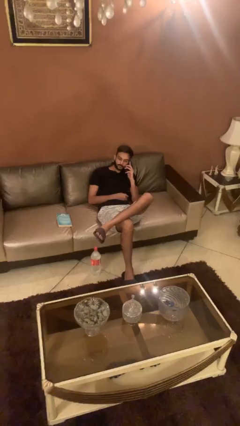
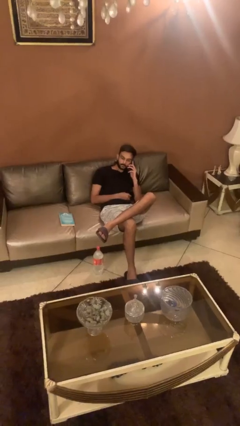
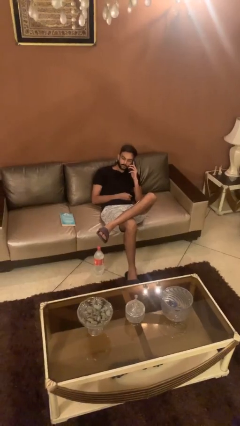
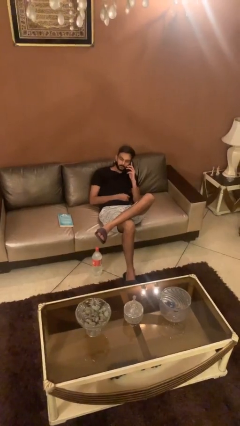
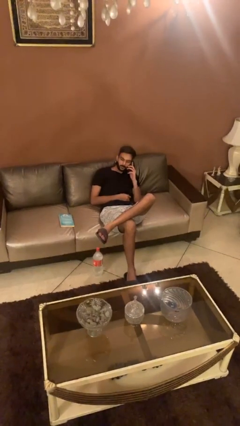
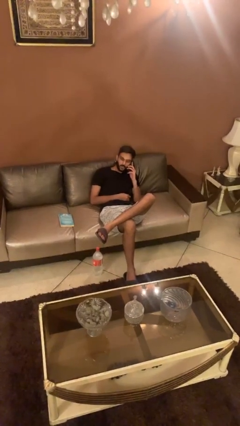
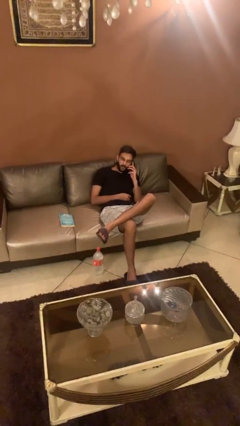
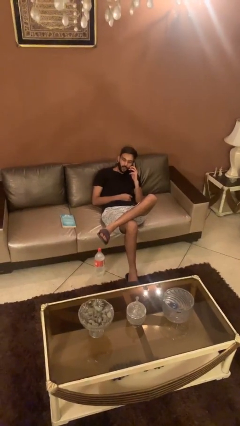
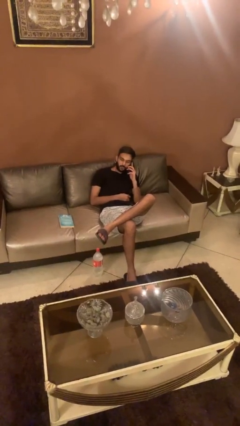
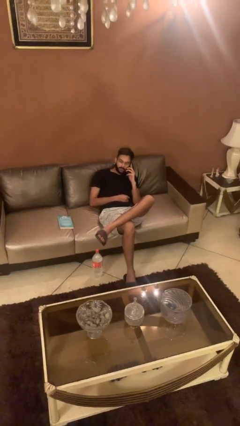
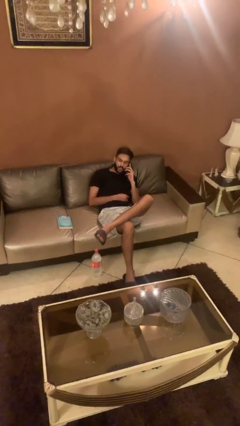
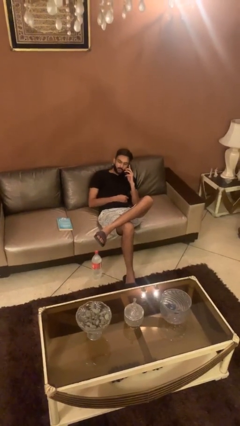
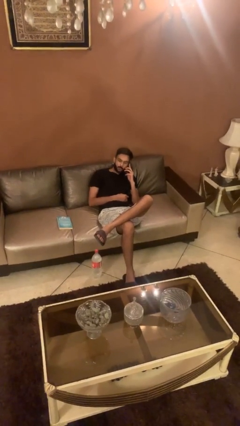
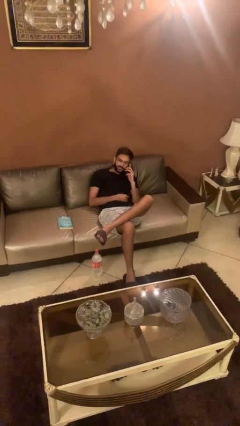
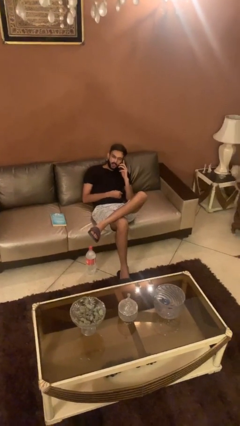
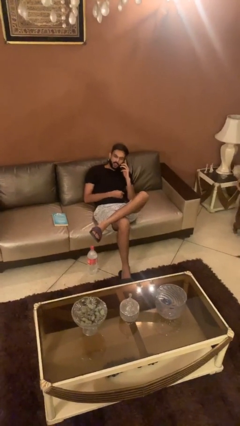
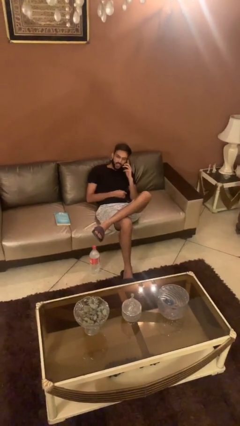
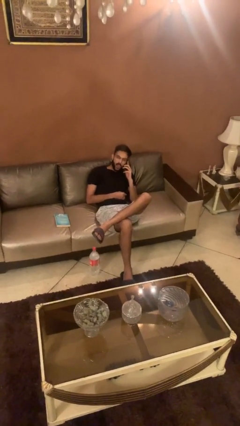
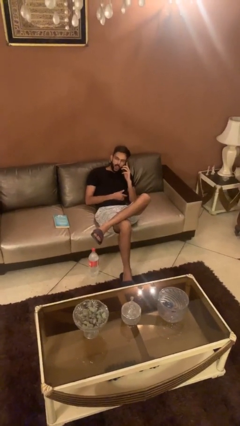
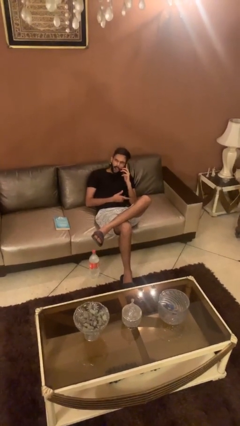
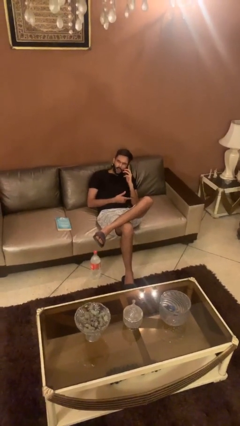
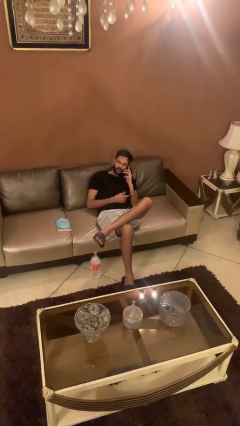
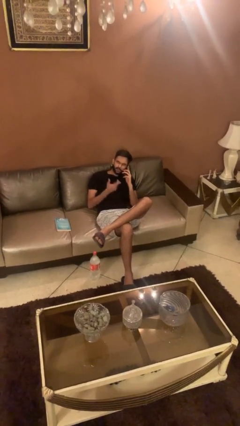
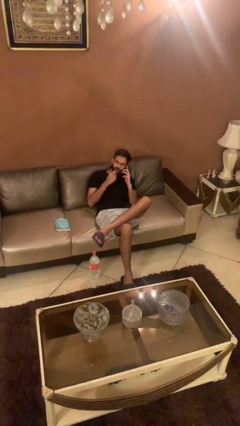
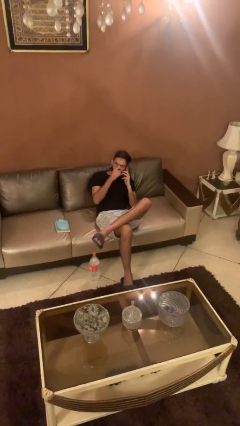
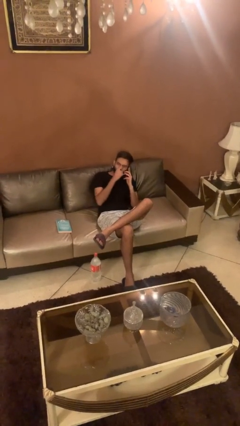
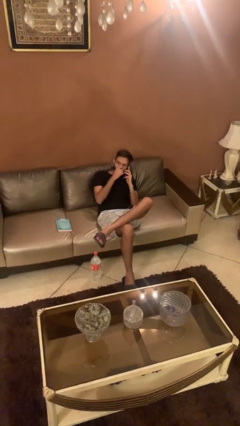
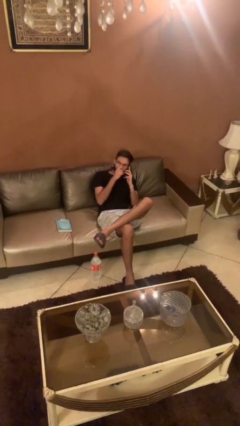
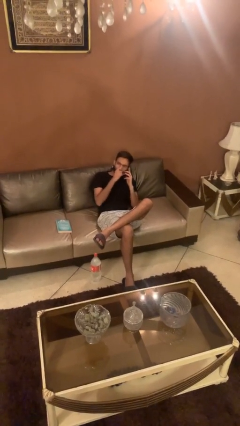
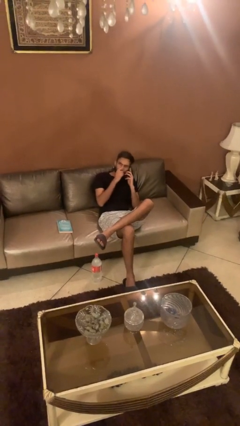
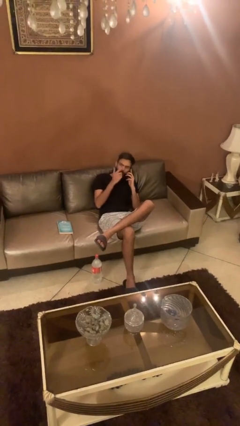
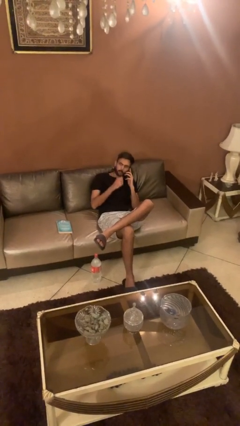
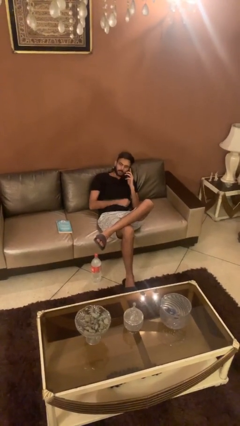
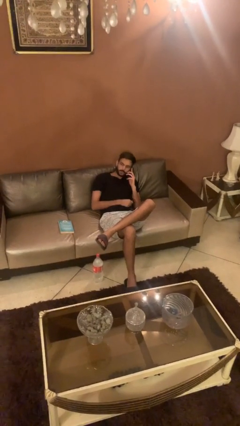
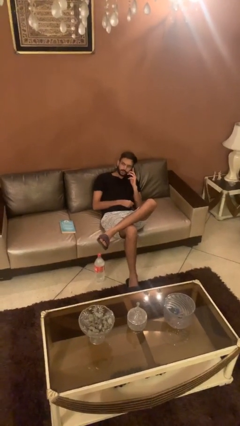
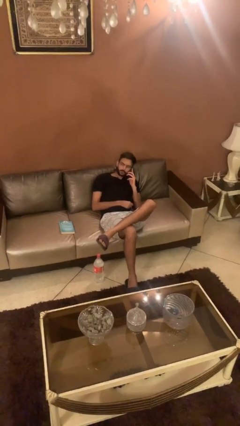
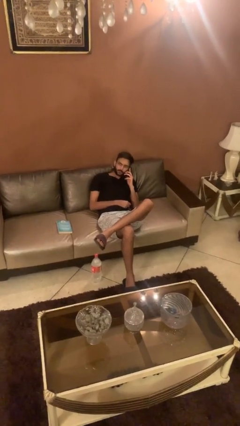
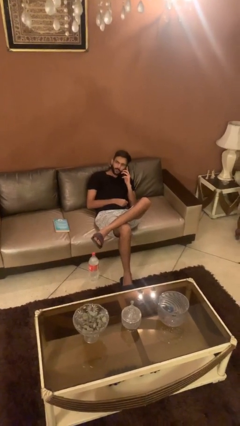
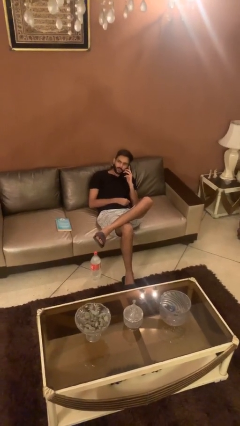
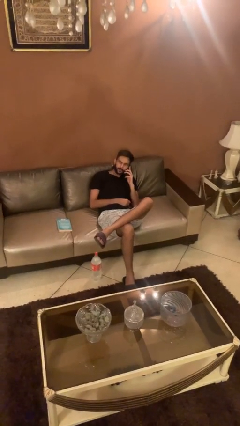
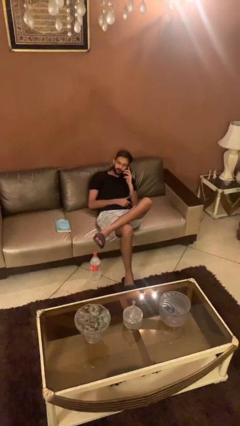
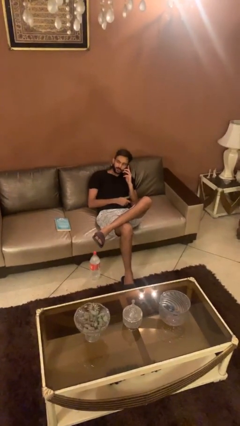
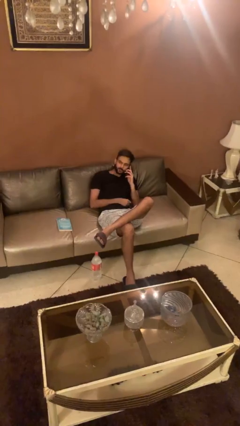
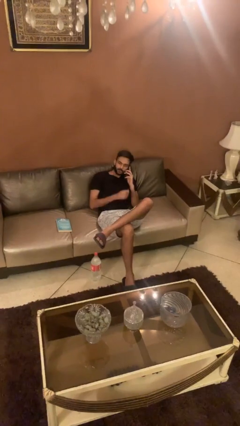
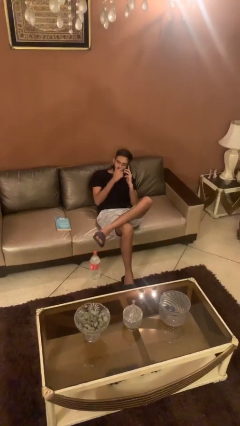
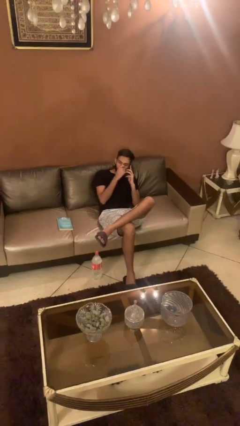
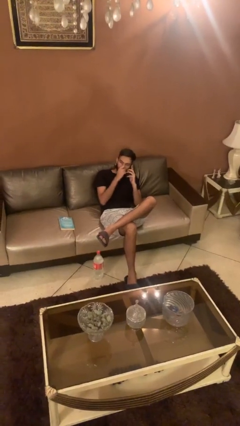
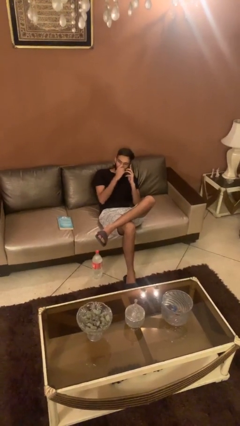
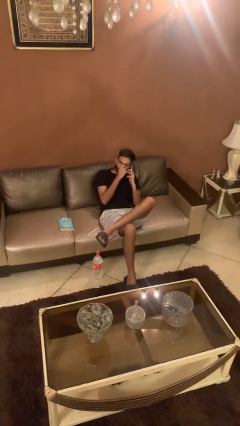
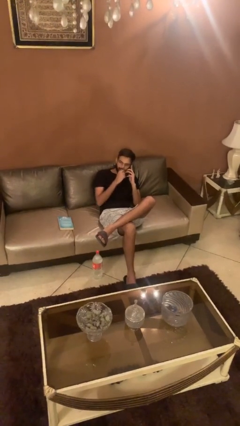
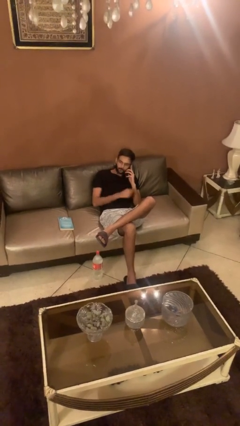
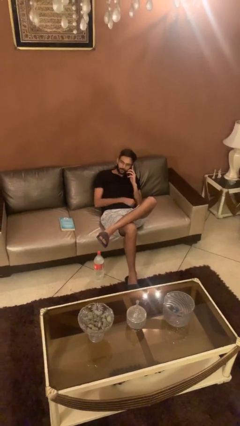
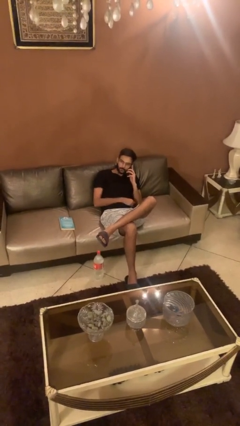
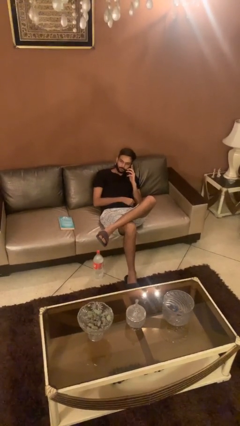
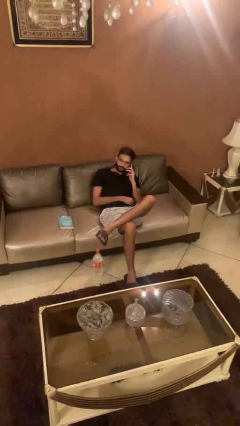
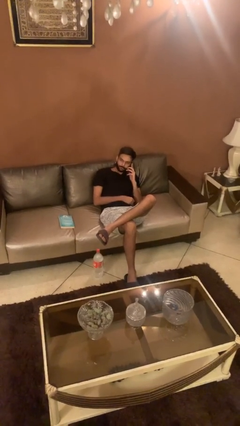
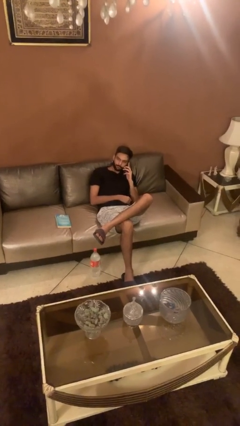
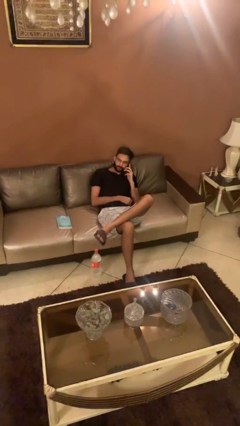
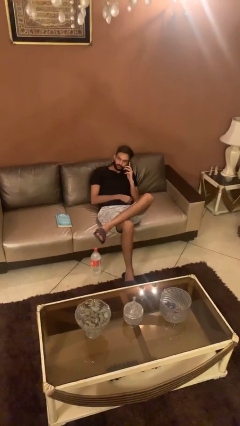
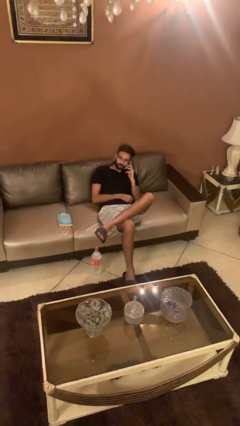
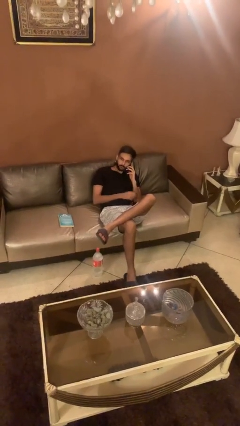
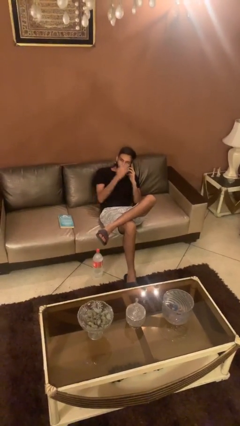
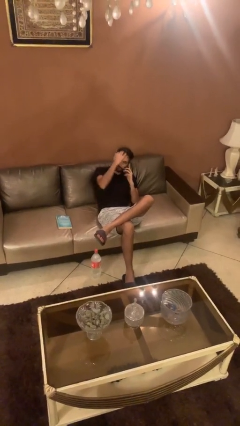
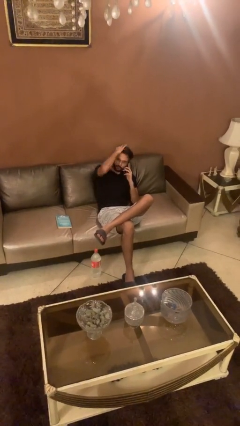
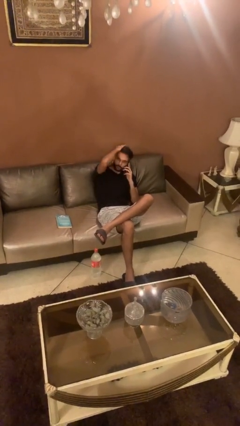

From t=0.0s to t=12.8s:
person talks on phone

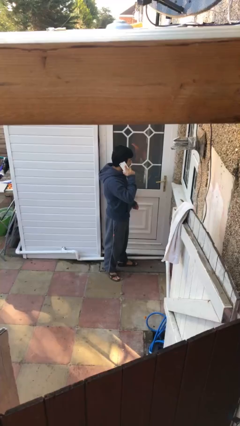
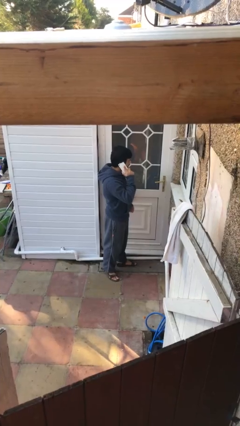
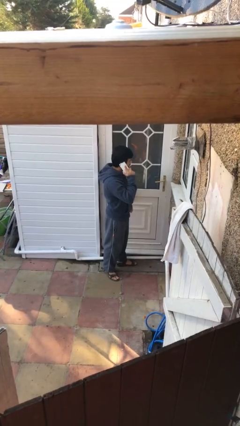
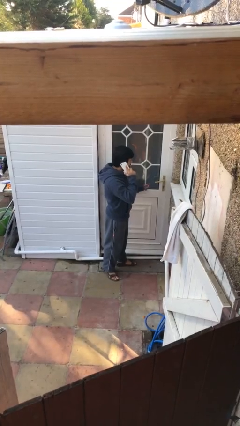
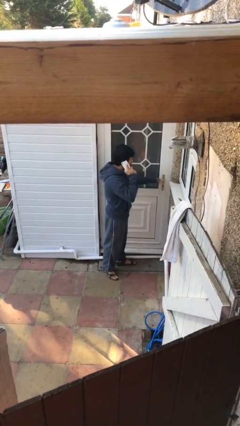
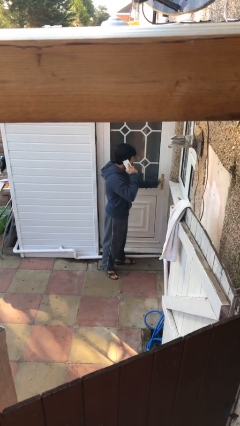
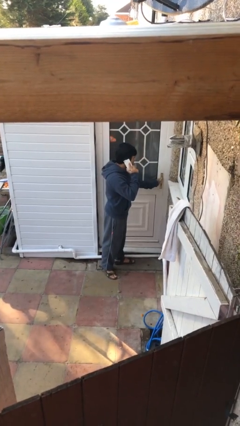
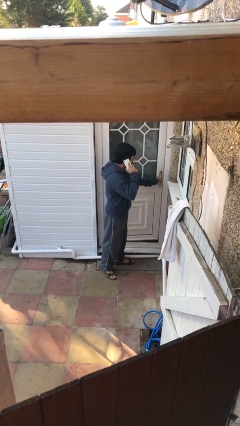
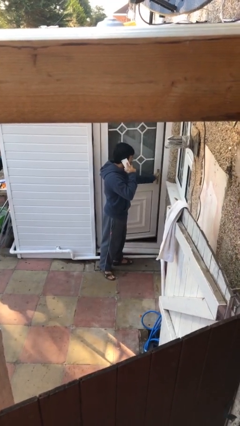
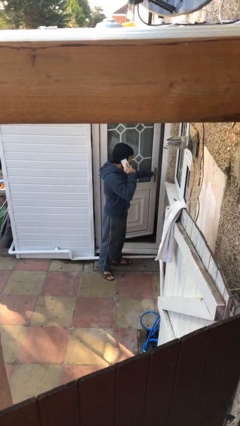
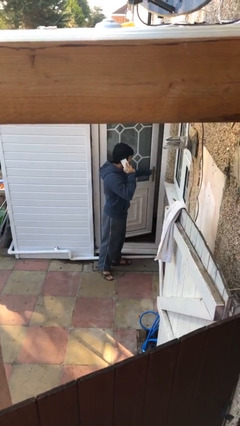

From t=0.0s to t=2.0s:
person opens facility door

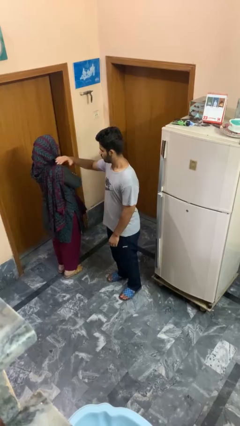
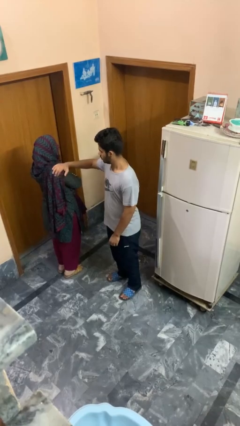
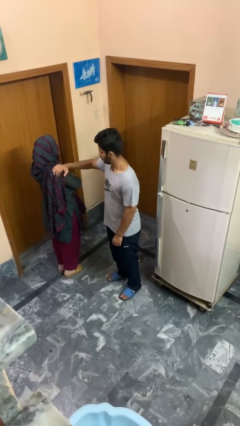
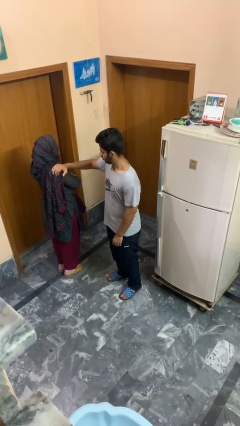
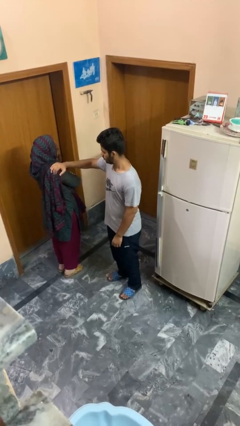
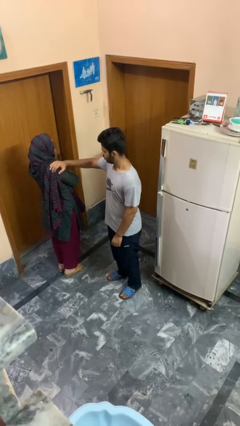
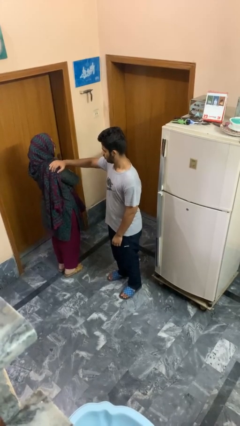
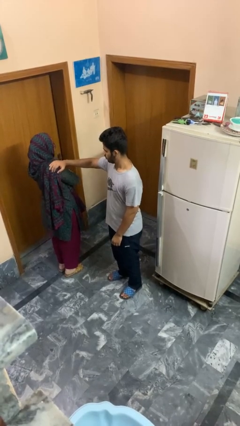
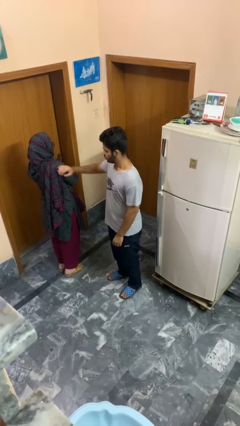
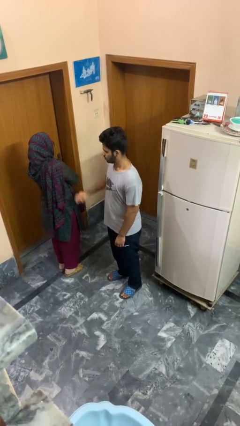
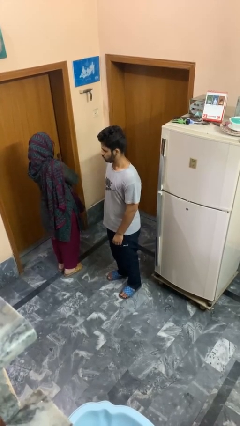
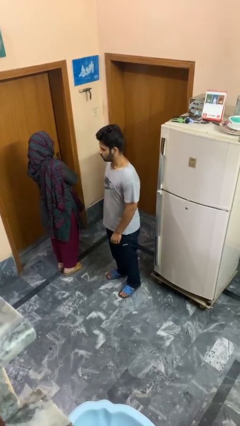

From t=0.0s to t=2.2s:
person pounds shoulders of person

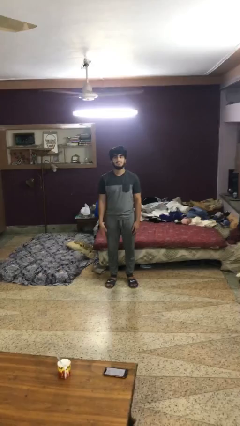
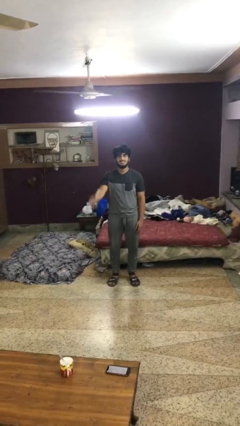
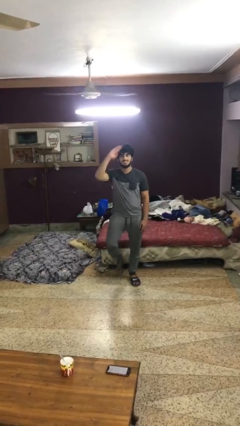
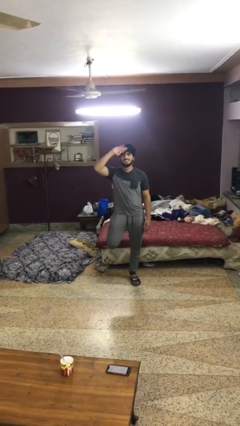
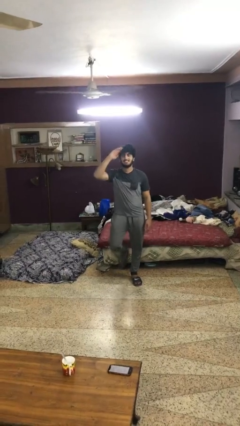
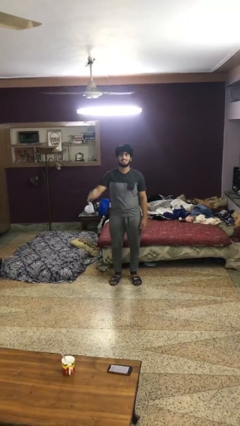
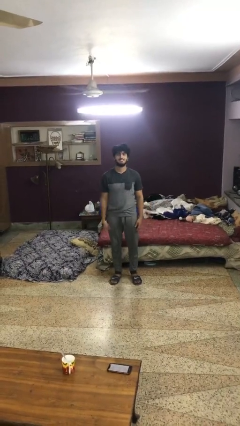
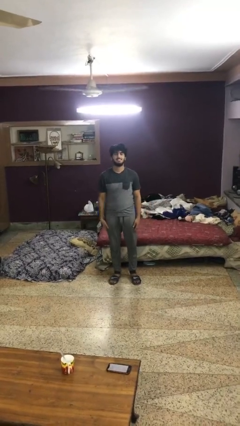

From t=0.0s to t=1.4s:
person salutes
